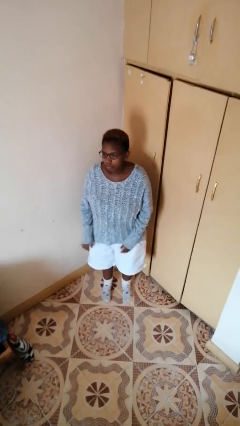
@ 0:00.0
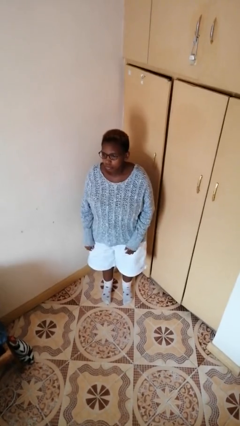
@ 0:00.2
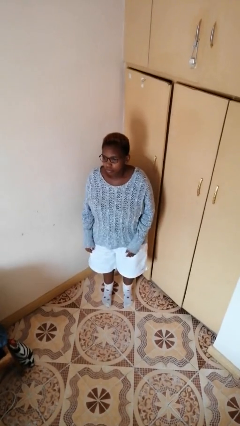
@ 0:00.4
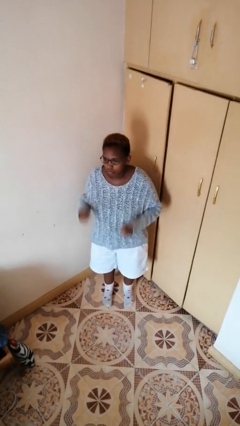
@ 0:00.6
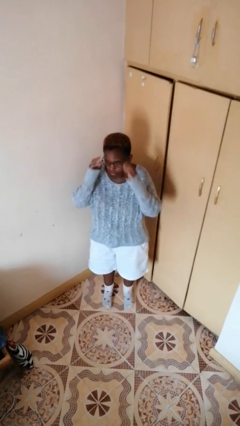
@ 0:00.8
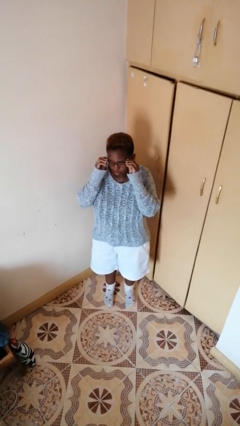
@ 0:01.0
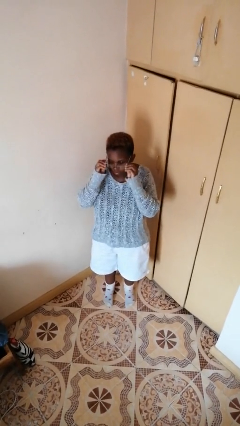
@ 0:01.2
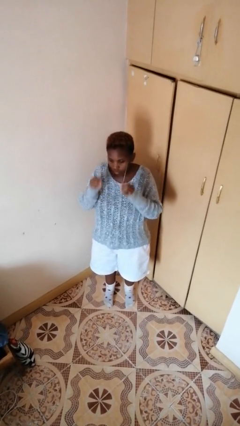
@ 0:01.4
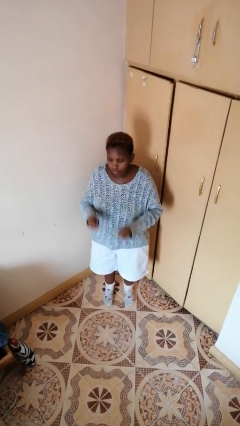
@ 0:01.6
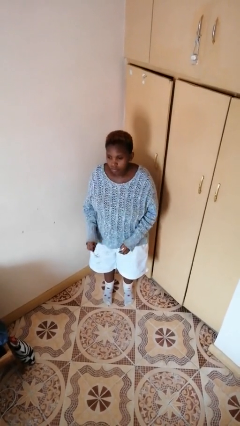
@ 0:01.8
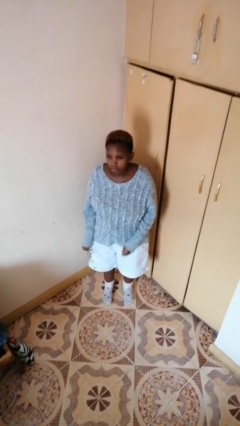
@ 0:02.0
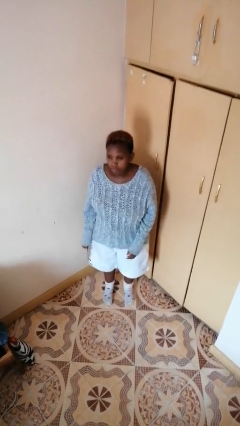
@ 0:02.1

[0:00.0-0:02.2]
person takes off glasses

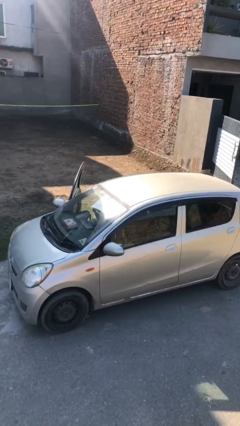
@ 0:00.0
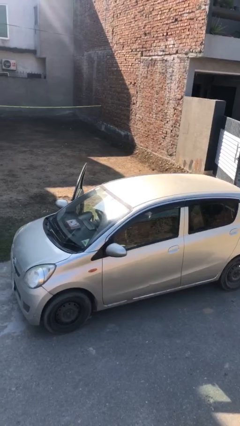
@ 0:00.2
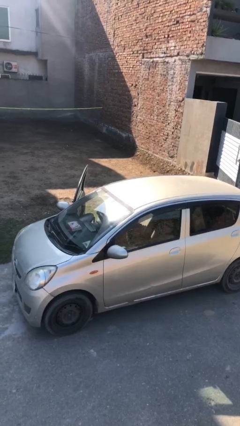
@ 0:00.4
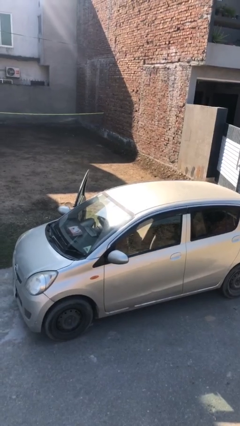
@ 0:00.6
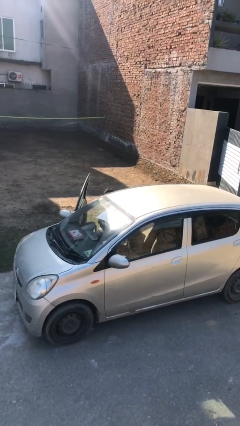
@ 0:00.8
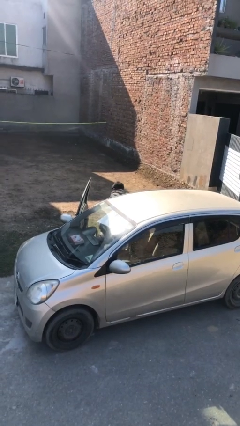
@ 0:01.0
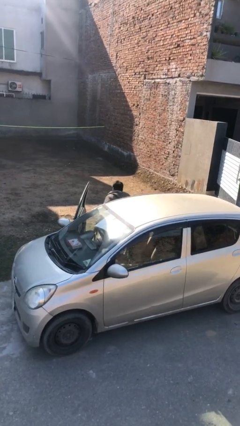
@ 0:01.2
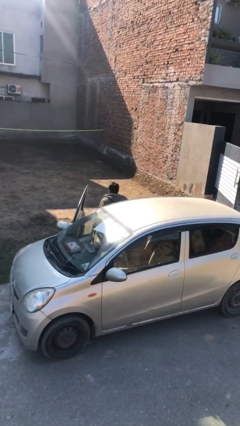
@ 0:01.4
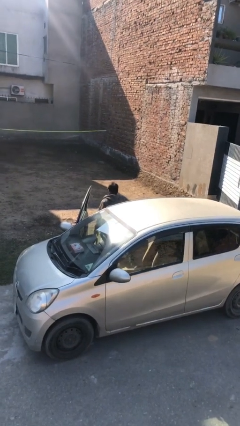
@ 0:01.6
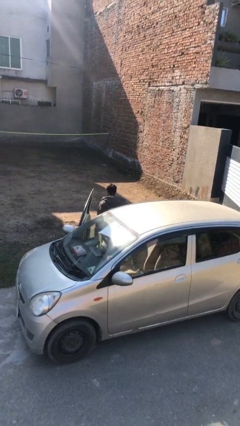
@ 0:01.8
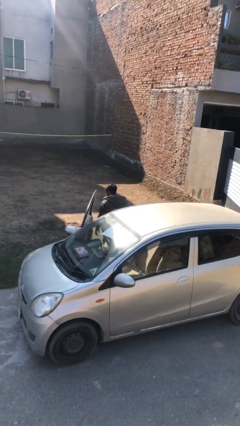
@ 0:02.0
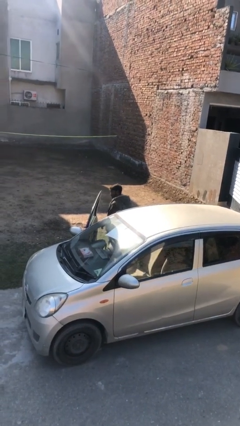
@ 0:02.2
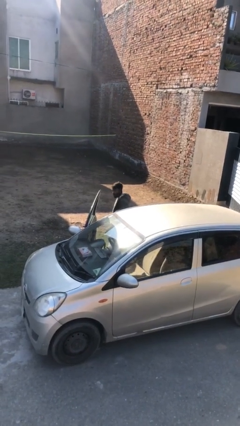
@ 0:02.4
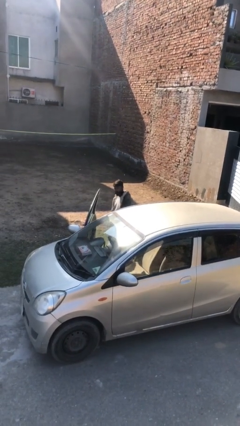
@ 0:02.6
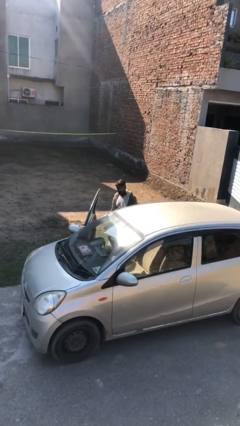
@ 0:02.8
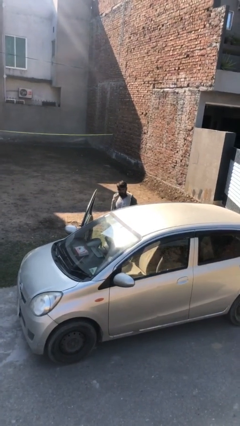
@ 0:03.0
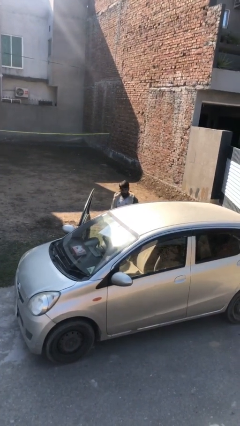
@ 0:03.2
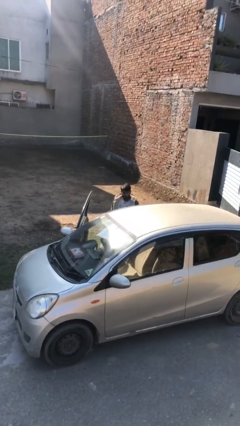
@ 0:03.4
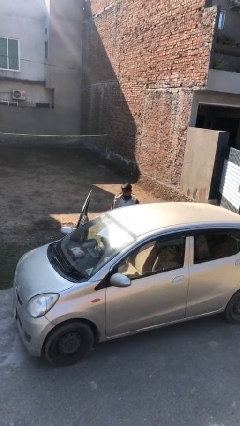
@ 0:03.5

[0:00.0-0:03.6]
person exits car

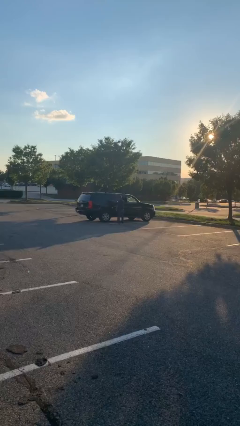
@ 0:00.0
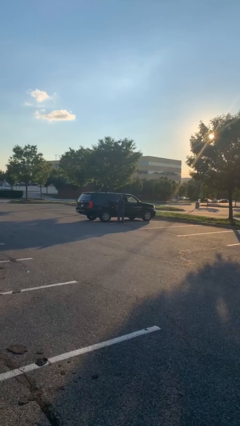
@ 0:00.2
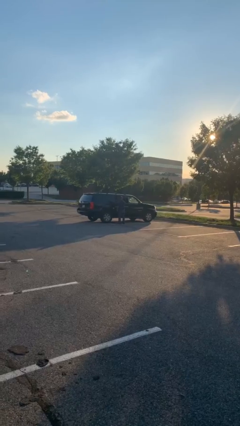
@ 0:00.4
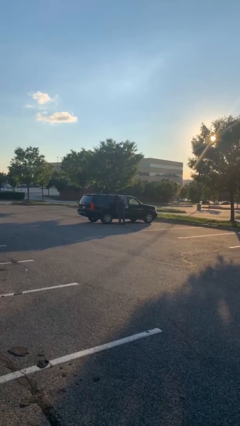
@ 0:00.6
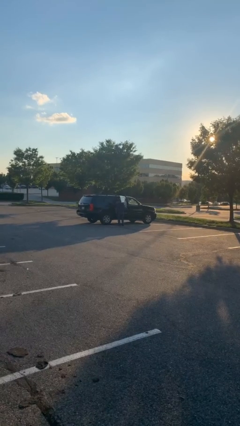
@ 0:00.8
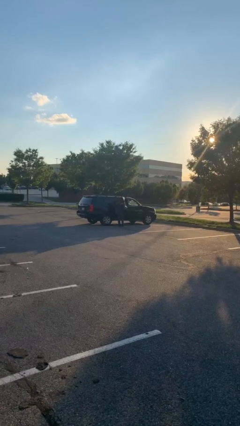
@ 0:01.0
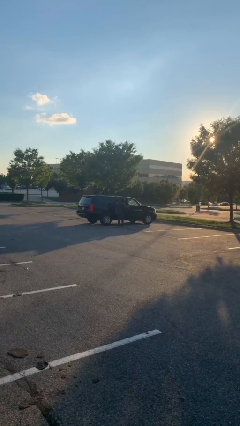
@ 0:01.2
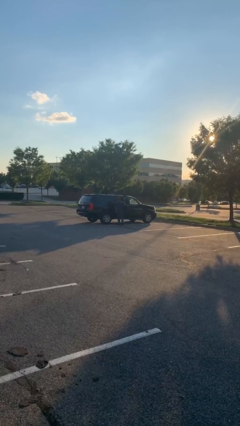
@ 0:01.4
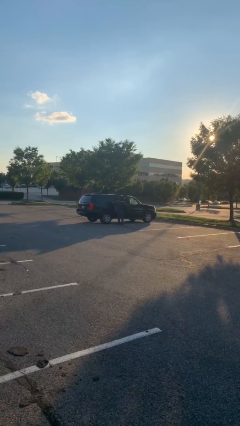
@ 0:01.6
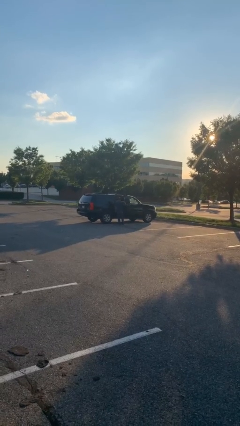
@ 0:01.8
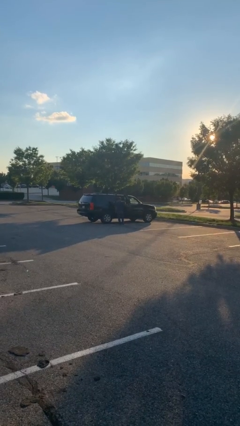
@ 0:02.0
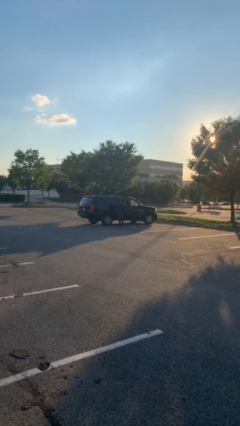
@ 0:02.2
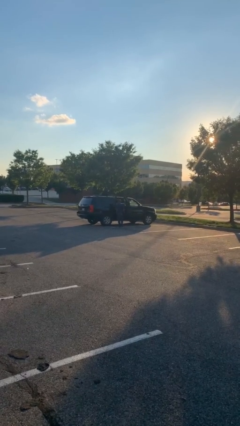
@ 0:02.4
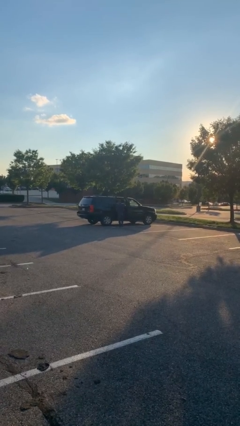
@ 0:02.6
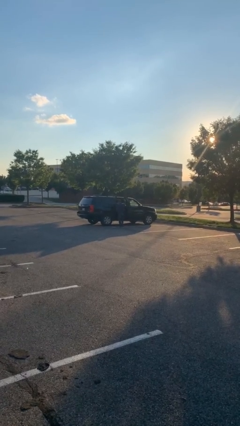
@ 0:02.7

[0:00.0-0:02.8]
person opens car door

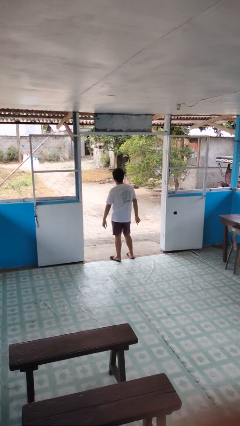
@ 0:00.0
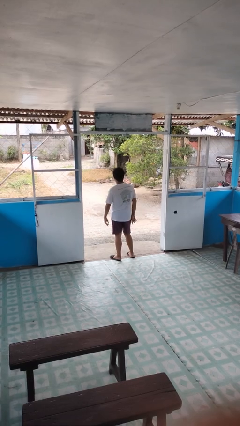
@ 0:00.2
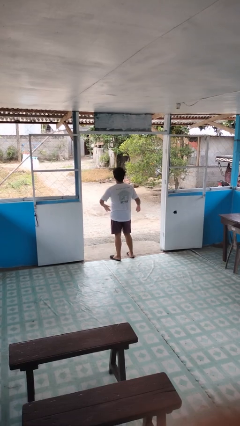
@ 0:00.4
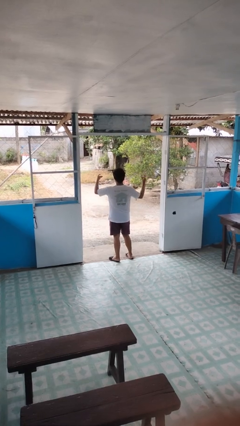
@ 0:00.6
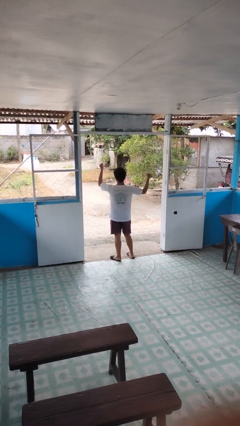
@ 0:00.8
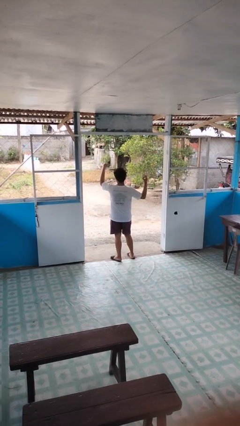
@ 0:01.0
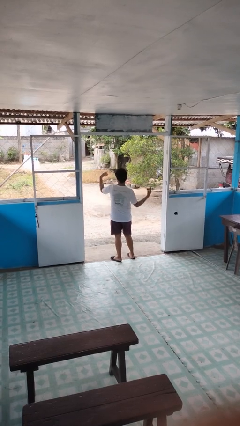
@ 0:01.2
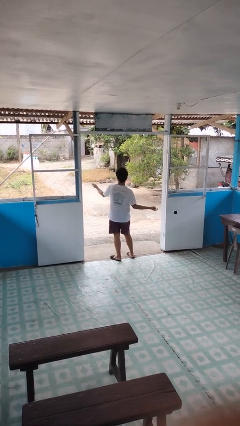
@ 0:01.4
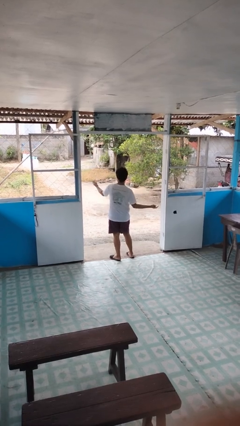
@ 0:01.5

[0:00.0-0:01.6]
person snaps fingers

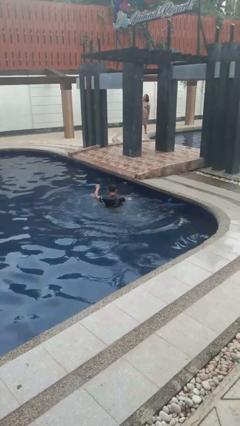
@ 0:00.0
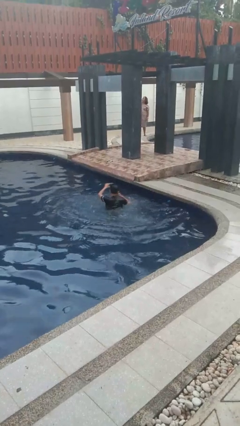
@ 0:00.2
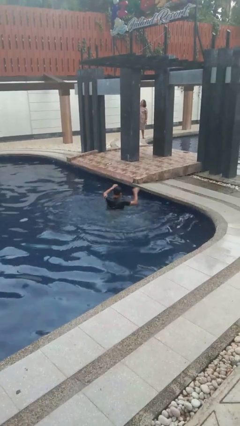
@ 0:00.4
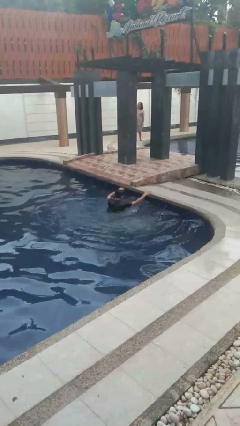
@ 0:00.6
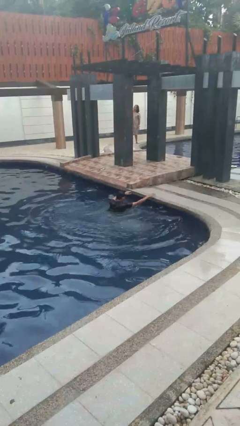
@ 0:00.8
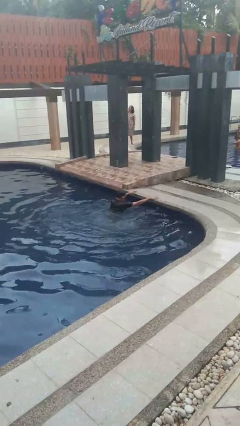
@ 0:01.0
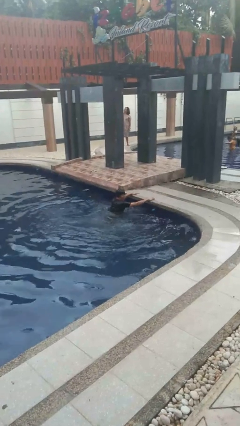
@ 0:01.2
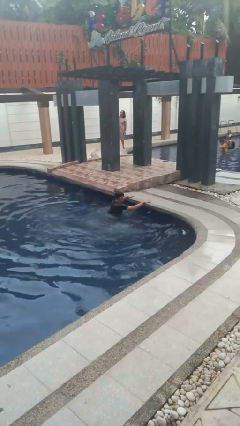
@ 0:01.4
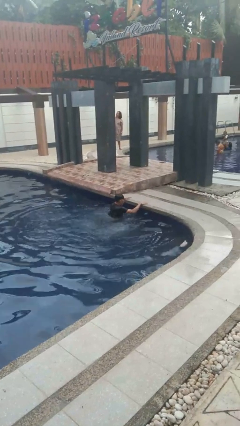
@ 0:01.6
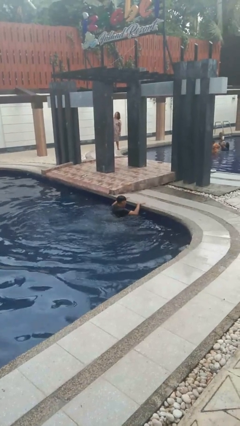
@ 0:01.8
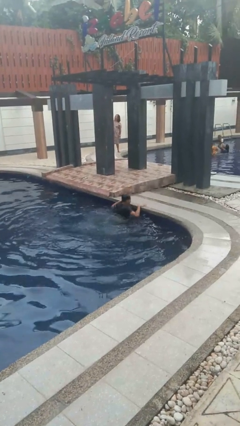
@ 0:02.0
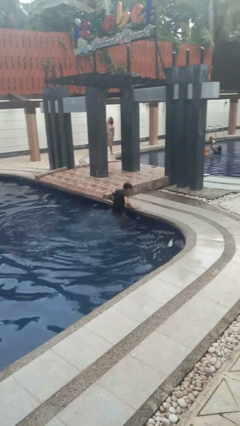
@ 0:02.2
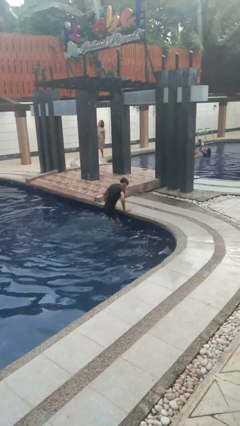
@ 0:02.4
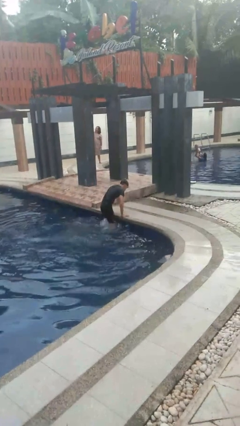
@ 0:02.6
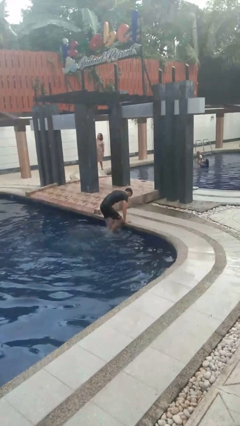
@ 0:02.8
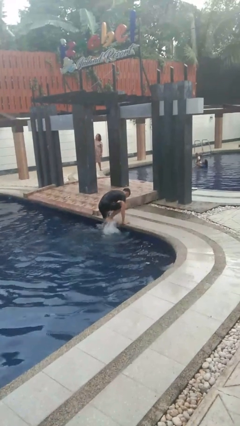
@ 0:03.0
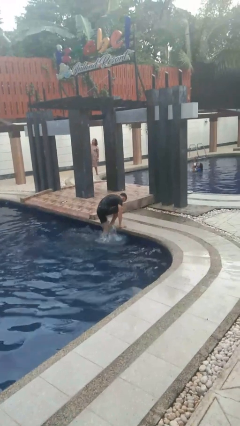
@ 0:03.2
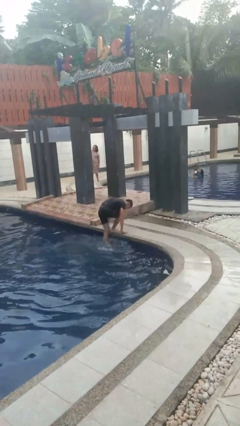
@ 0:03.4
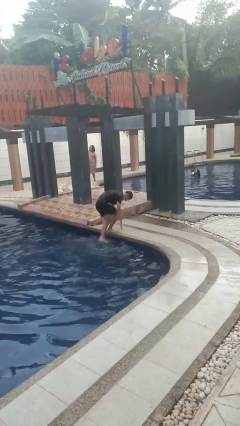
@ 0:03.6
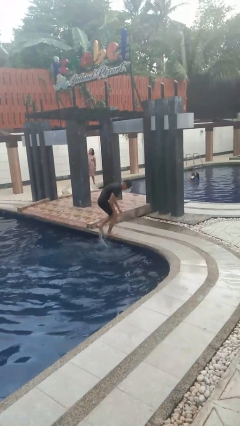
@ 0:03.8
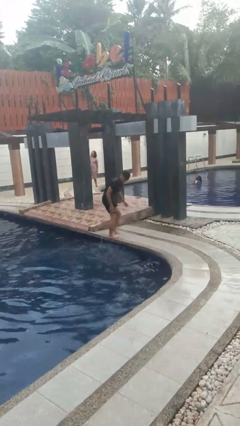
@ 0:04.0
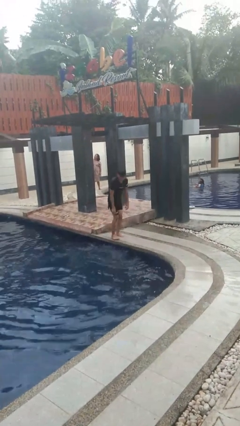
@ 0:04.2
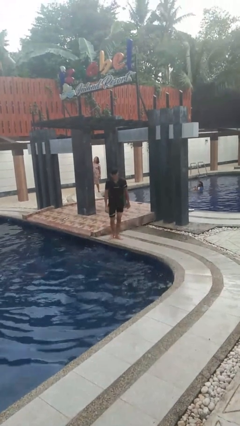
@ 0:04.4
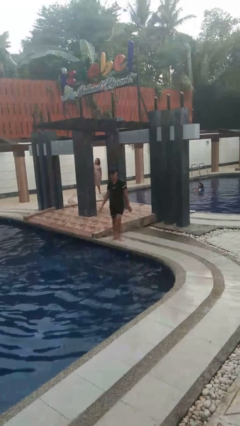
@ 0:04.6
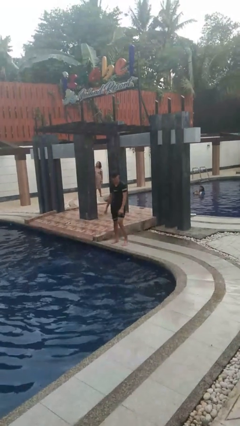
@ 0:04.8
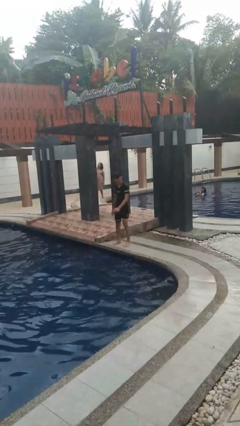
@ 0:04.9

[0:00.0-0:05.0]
person exits pool

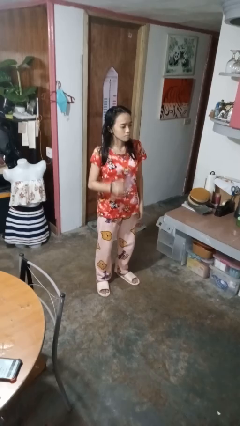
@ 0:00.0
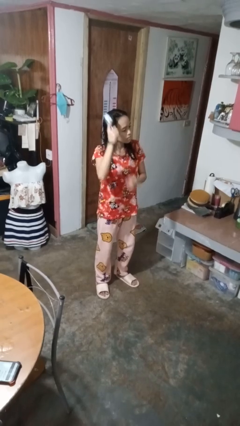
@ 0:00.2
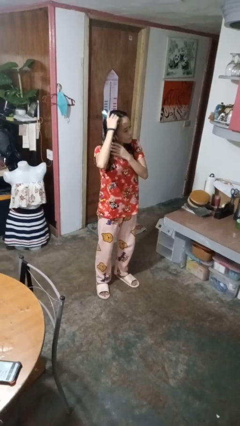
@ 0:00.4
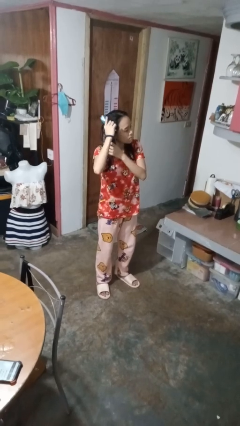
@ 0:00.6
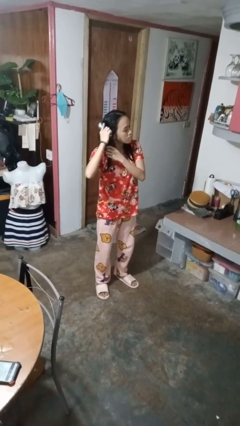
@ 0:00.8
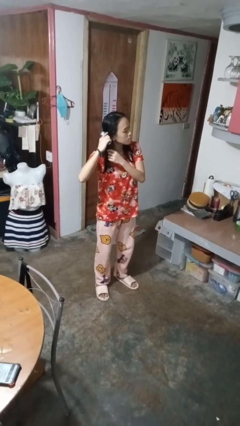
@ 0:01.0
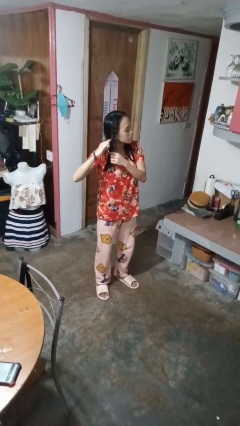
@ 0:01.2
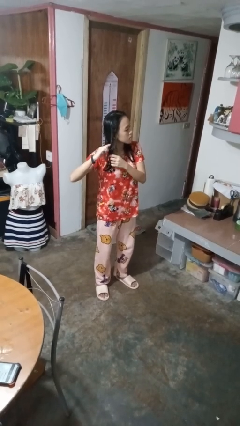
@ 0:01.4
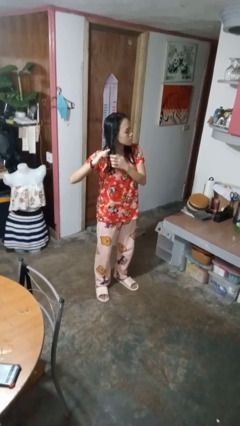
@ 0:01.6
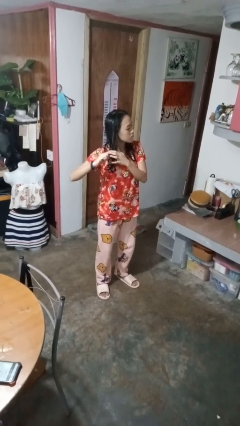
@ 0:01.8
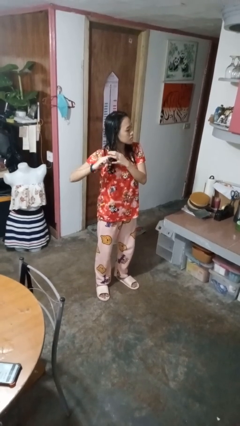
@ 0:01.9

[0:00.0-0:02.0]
person brushes hair

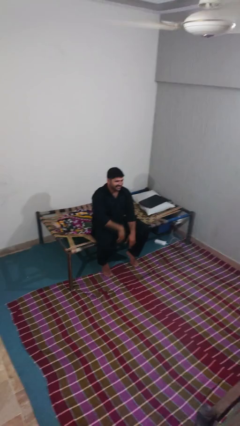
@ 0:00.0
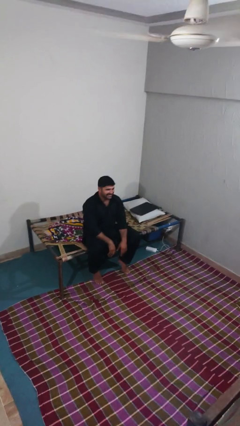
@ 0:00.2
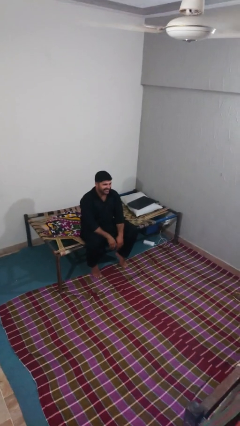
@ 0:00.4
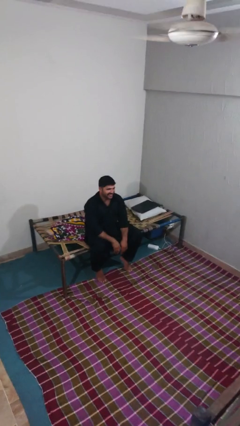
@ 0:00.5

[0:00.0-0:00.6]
person gestures lower hand
